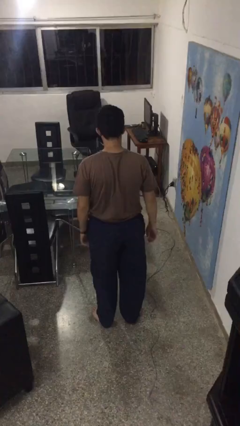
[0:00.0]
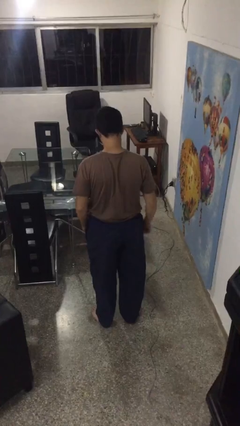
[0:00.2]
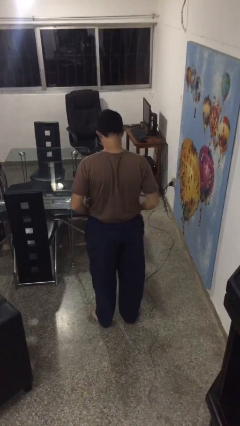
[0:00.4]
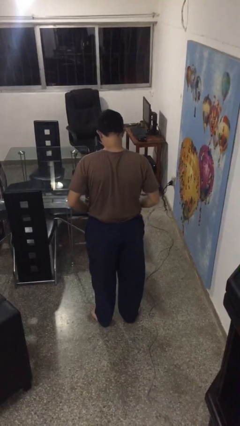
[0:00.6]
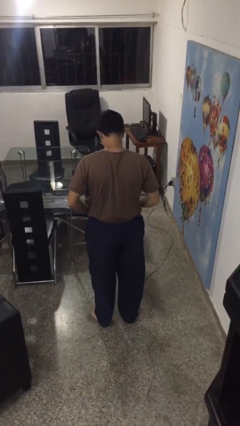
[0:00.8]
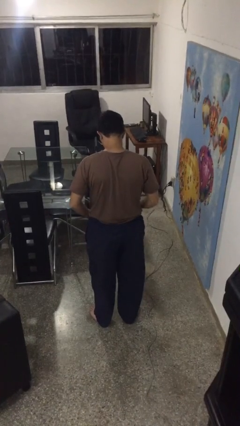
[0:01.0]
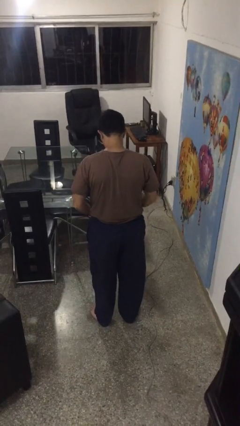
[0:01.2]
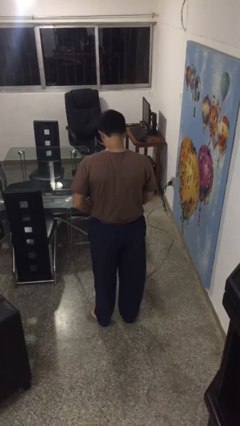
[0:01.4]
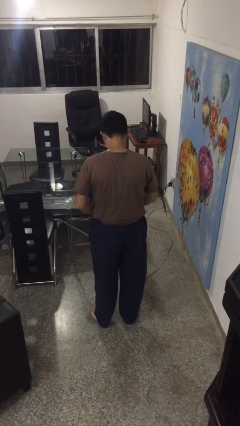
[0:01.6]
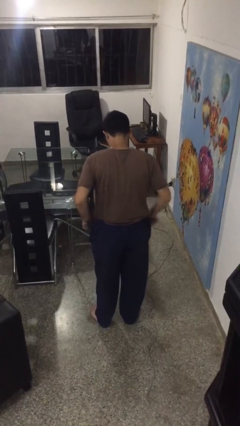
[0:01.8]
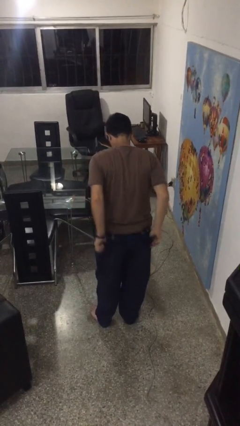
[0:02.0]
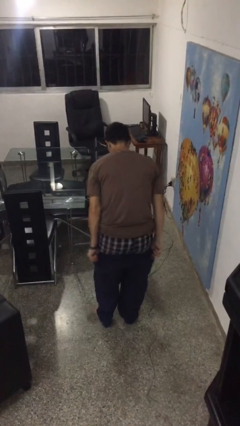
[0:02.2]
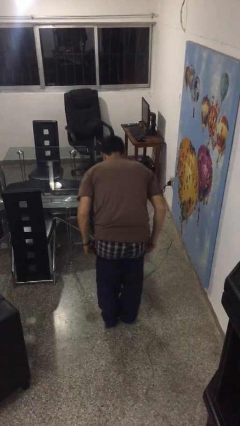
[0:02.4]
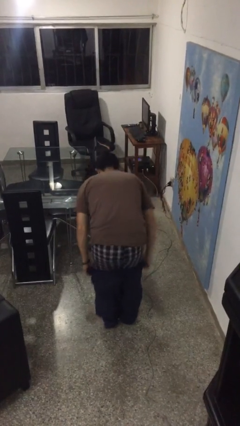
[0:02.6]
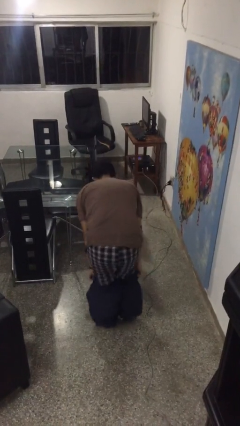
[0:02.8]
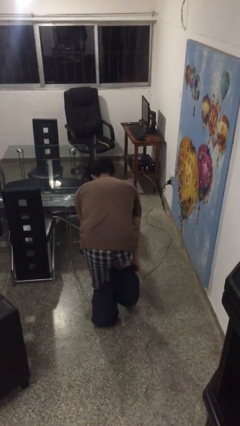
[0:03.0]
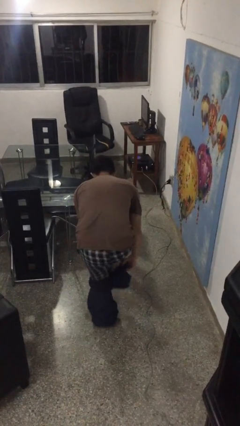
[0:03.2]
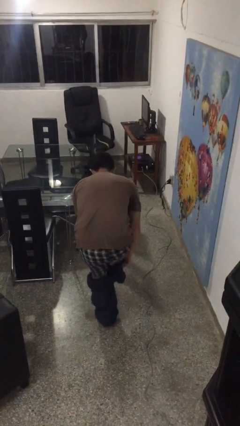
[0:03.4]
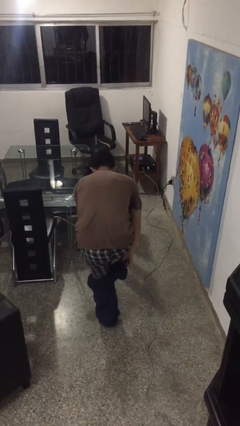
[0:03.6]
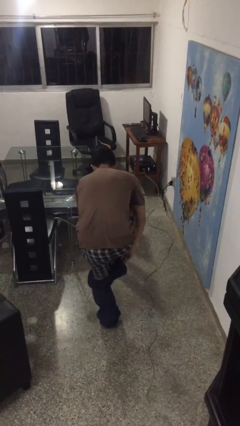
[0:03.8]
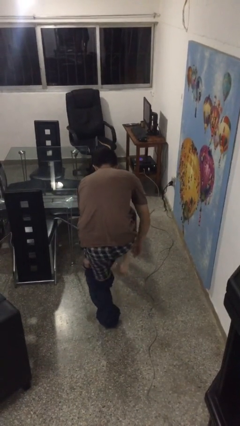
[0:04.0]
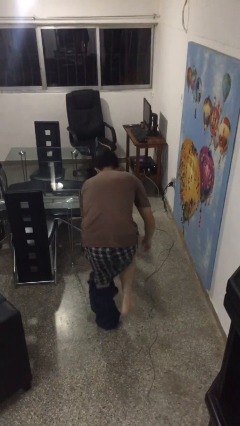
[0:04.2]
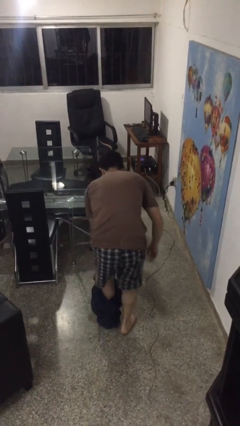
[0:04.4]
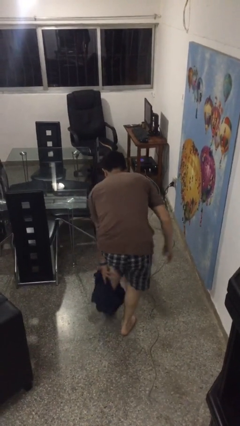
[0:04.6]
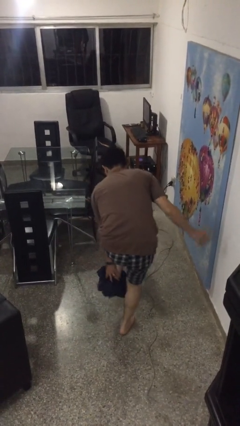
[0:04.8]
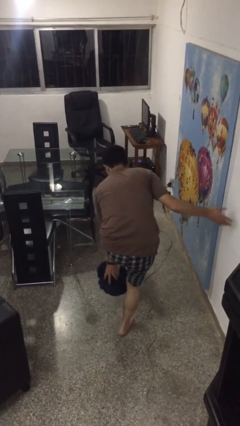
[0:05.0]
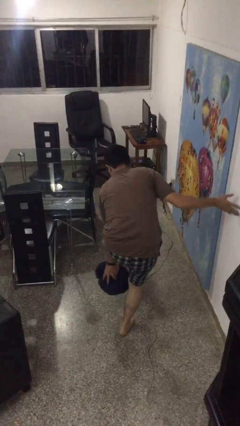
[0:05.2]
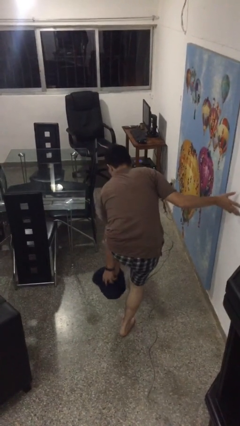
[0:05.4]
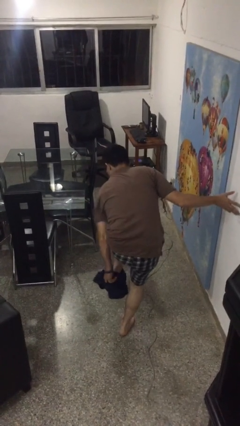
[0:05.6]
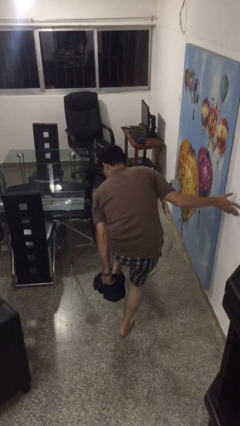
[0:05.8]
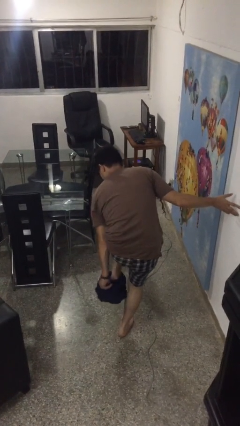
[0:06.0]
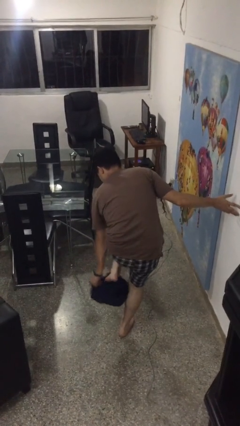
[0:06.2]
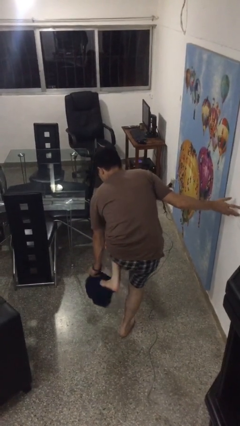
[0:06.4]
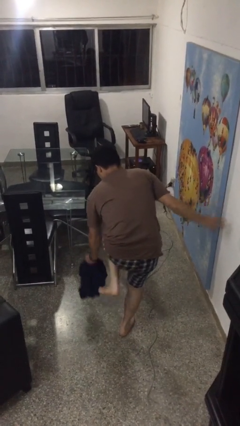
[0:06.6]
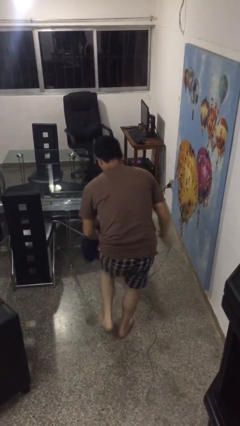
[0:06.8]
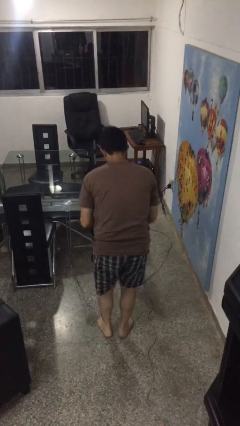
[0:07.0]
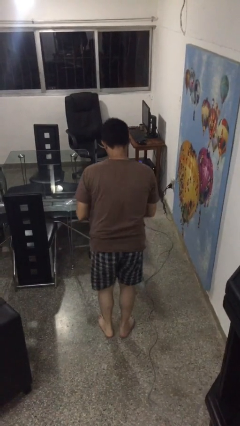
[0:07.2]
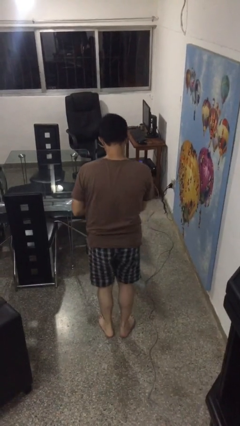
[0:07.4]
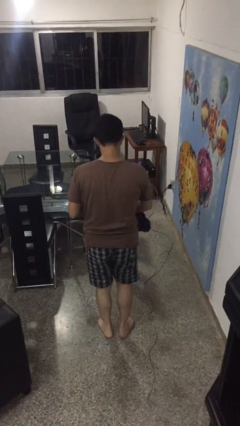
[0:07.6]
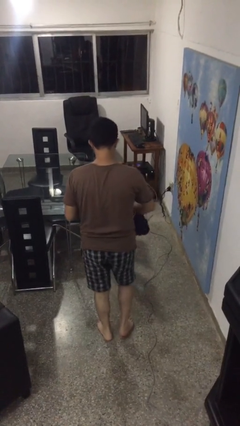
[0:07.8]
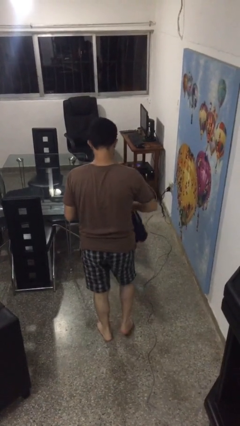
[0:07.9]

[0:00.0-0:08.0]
person takes off pants

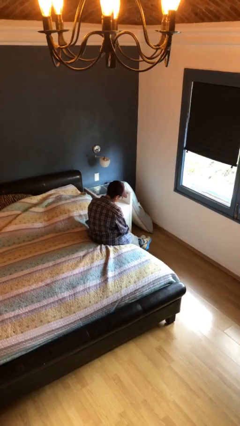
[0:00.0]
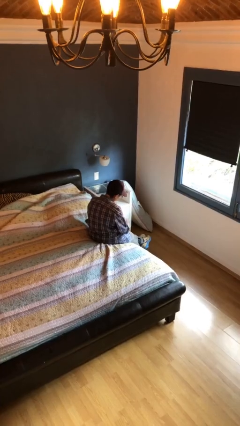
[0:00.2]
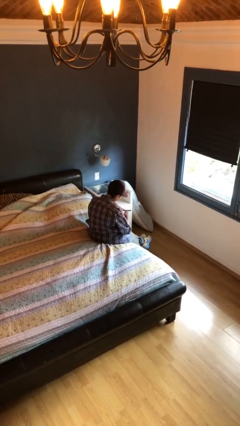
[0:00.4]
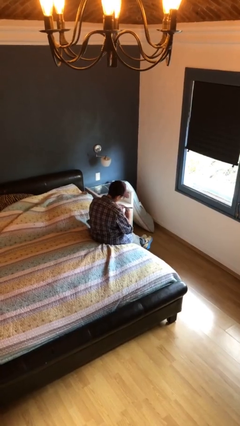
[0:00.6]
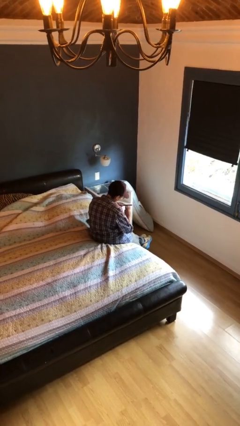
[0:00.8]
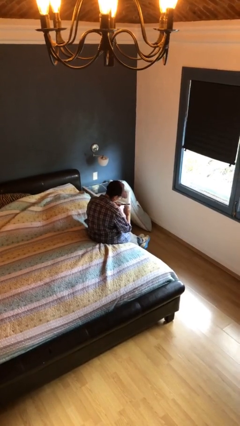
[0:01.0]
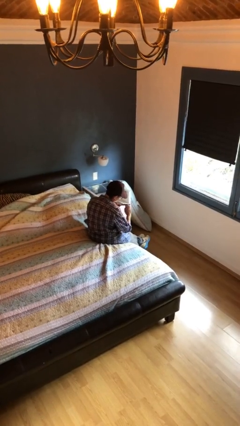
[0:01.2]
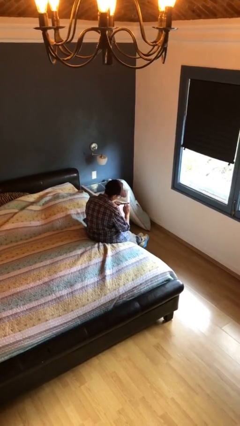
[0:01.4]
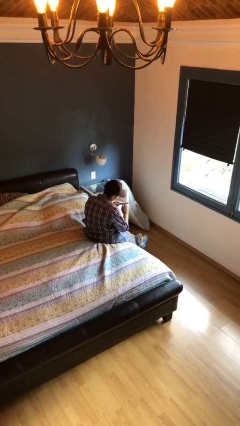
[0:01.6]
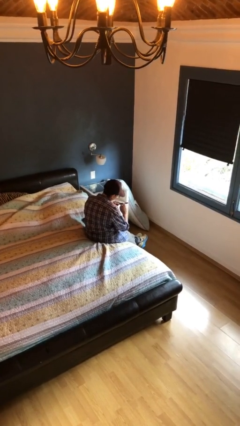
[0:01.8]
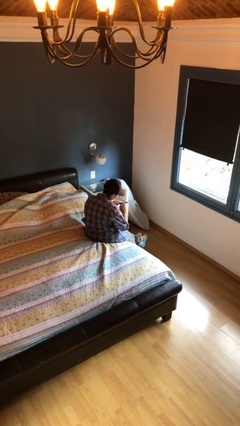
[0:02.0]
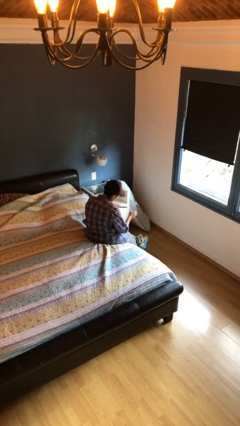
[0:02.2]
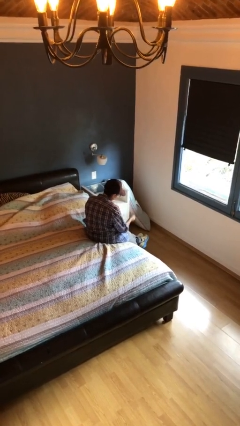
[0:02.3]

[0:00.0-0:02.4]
person files fingernails

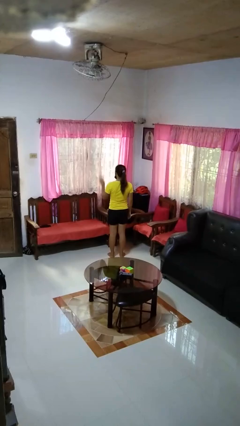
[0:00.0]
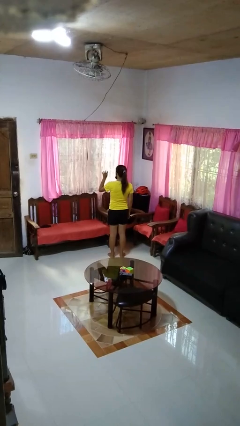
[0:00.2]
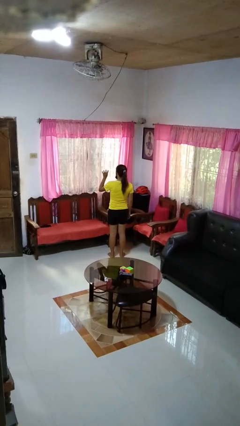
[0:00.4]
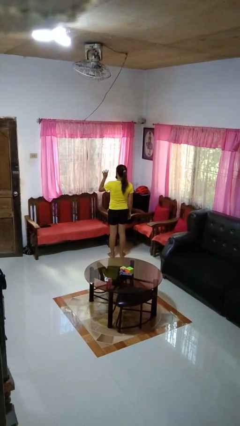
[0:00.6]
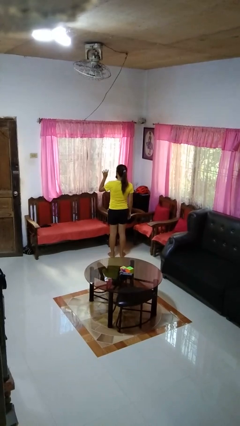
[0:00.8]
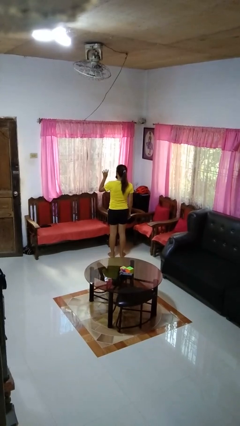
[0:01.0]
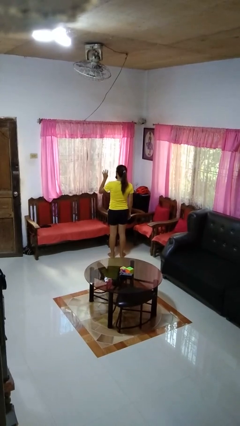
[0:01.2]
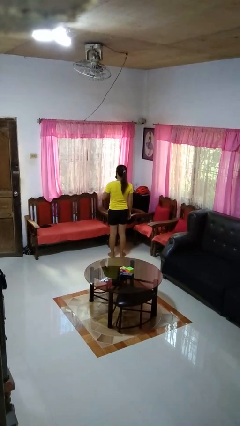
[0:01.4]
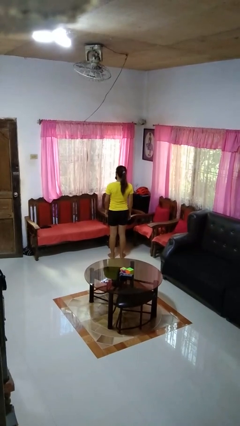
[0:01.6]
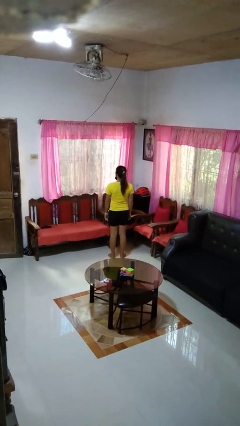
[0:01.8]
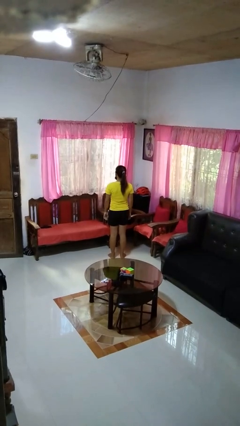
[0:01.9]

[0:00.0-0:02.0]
person gestures number four

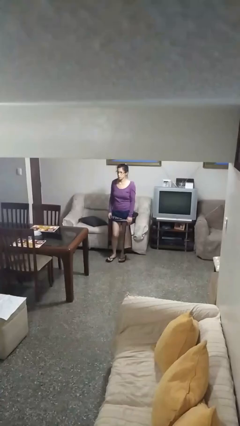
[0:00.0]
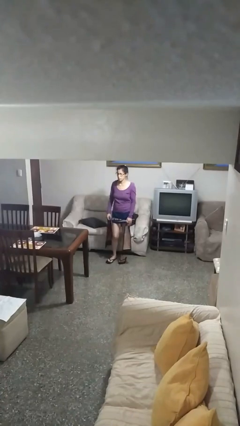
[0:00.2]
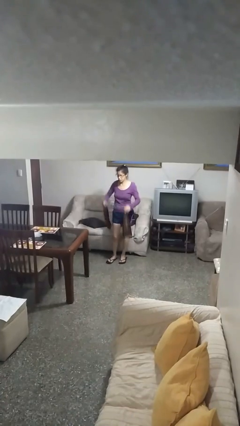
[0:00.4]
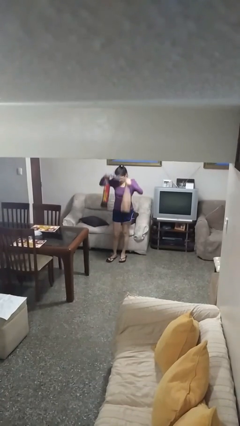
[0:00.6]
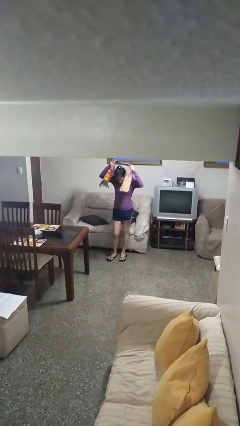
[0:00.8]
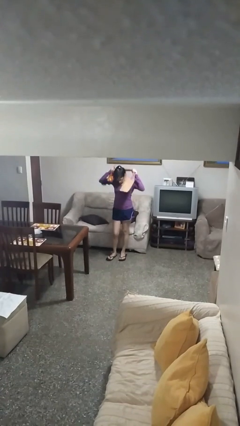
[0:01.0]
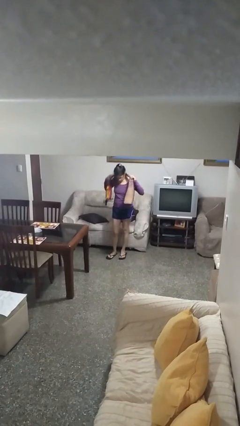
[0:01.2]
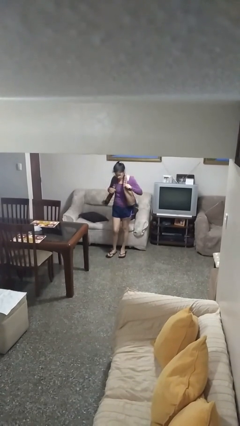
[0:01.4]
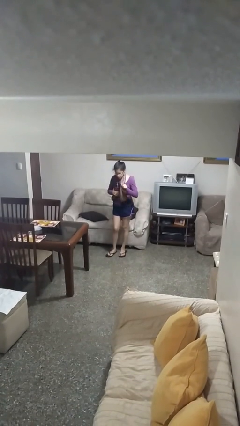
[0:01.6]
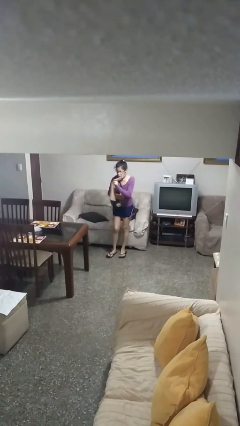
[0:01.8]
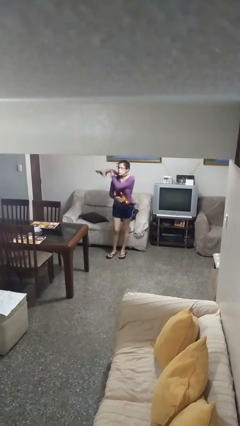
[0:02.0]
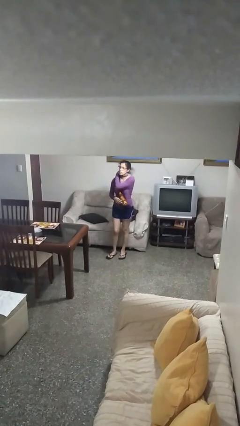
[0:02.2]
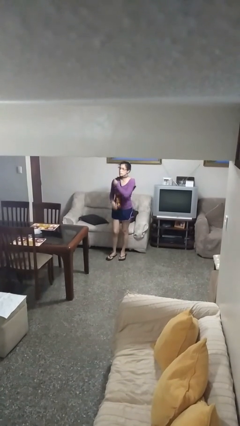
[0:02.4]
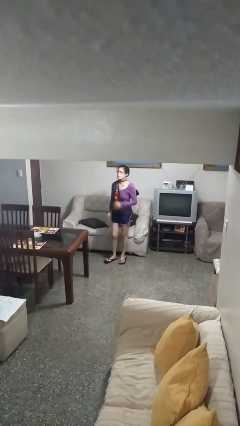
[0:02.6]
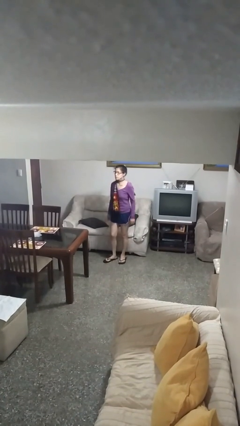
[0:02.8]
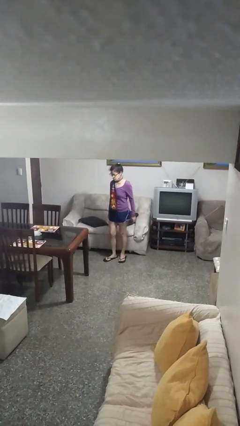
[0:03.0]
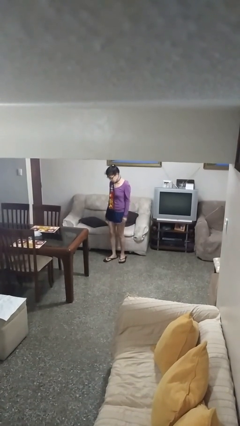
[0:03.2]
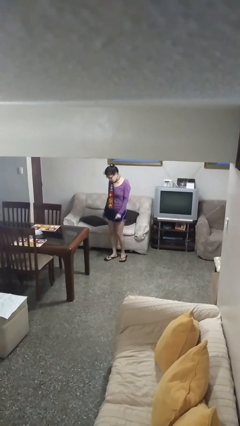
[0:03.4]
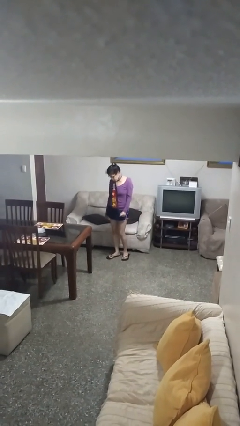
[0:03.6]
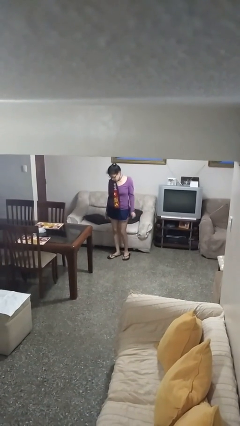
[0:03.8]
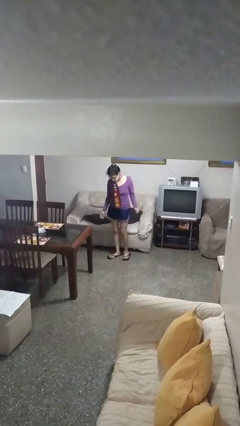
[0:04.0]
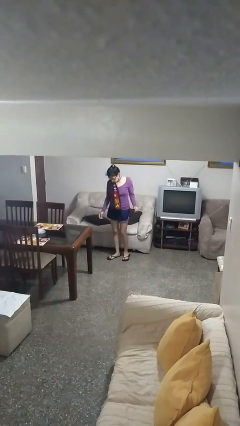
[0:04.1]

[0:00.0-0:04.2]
person puts on scarf

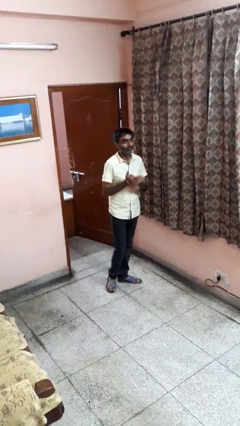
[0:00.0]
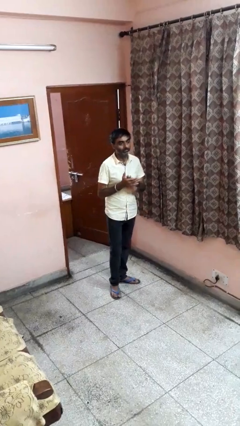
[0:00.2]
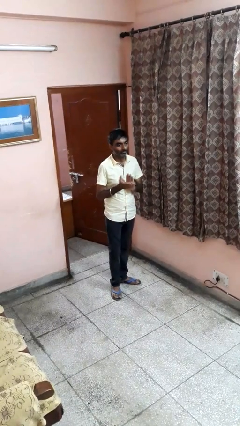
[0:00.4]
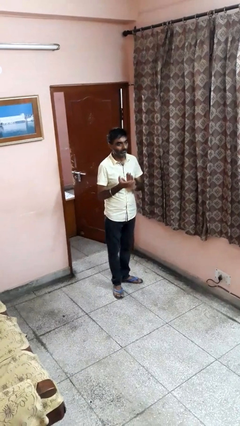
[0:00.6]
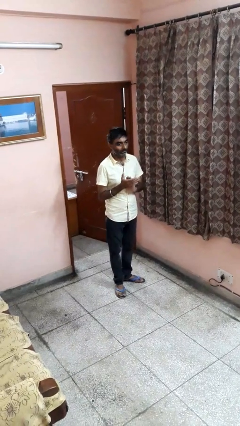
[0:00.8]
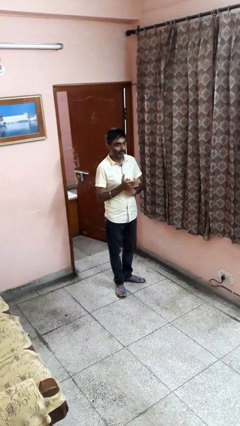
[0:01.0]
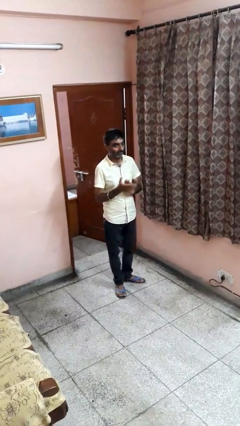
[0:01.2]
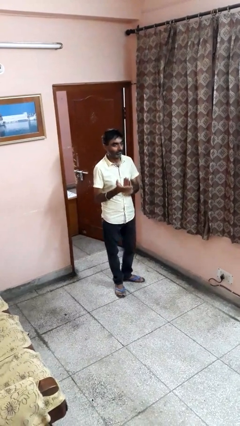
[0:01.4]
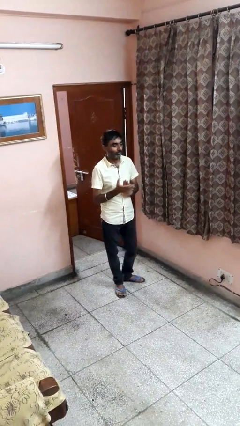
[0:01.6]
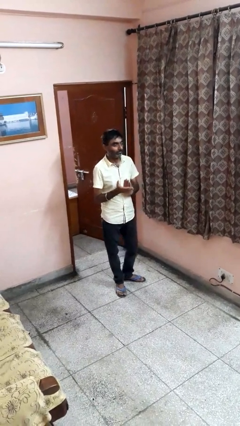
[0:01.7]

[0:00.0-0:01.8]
person claps hands
